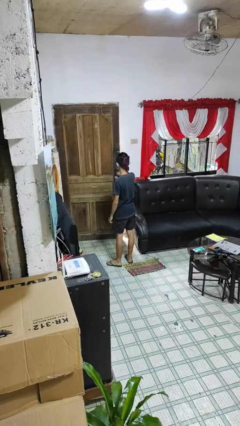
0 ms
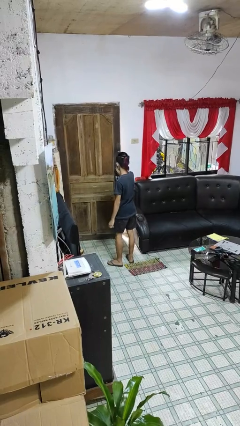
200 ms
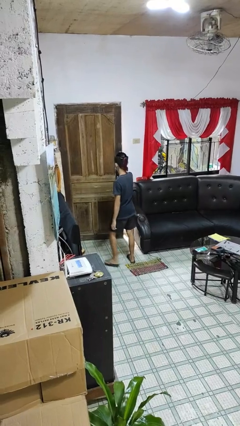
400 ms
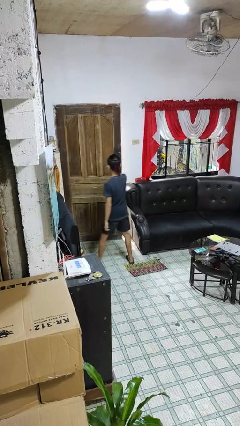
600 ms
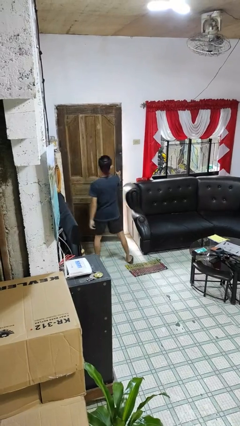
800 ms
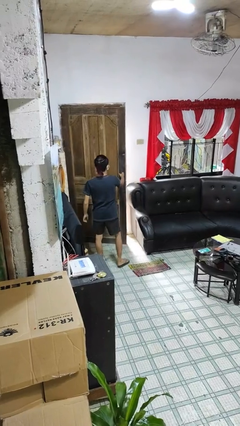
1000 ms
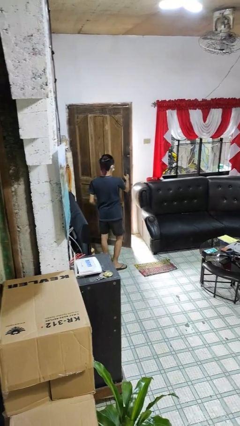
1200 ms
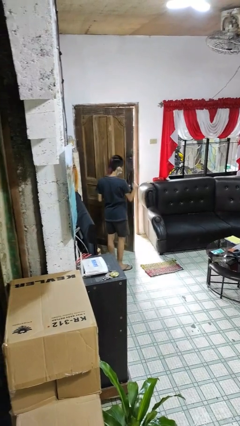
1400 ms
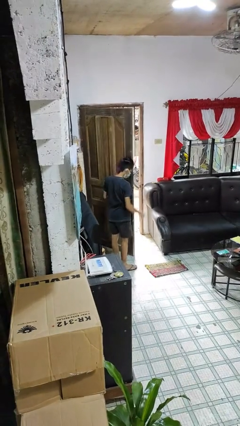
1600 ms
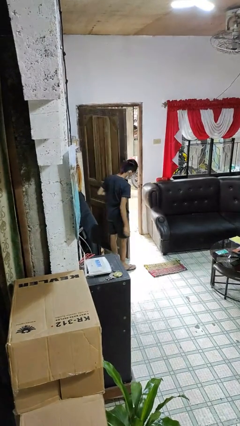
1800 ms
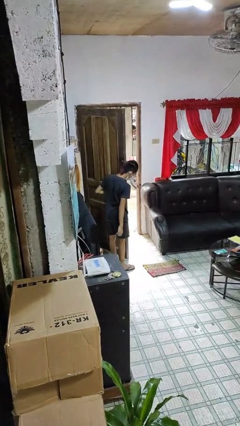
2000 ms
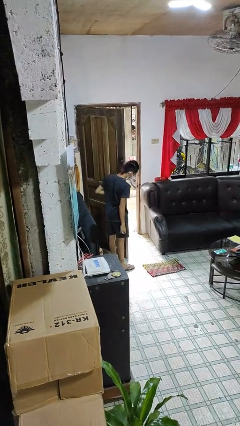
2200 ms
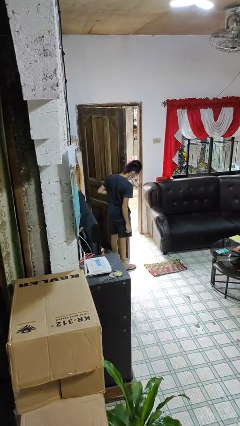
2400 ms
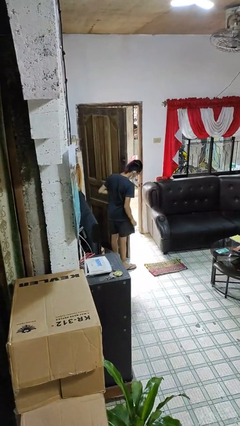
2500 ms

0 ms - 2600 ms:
person opens facility door

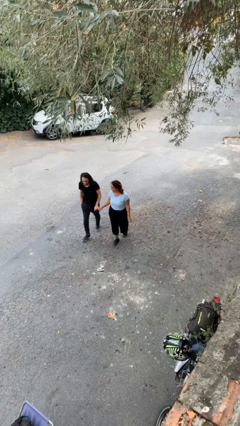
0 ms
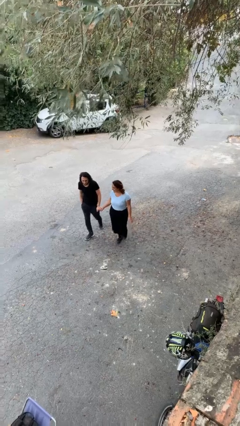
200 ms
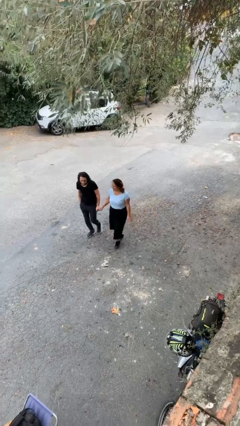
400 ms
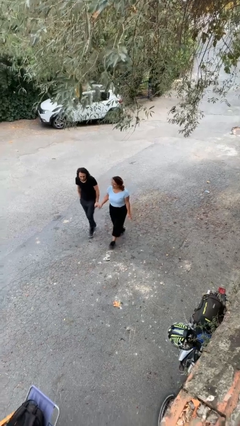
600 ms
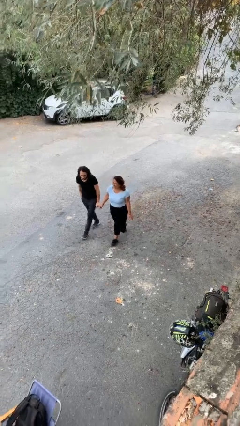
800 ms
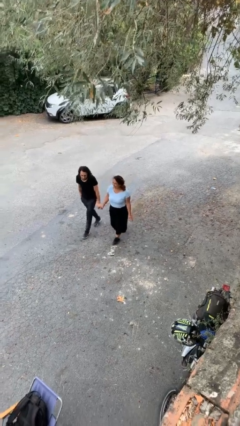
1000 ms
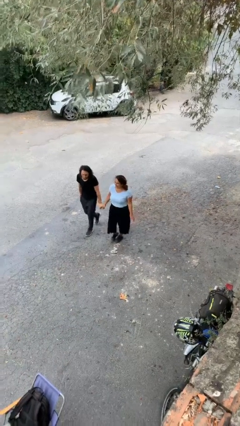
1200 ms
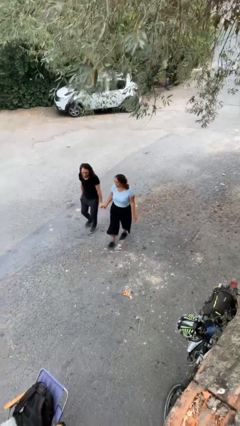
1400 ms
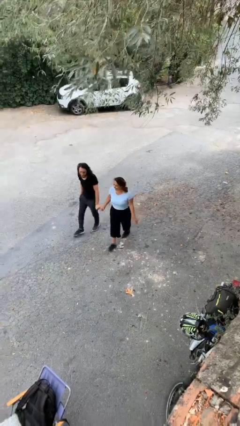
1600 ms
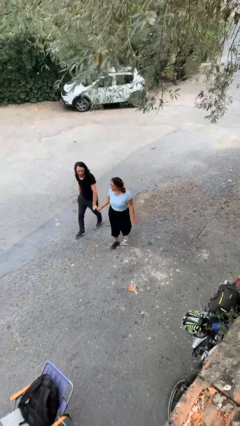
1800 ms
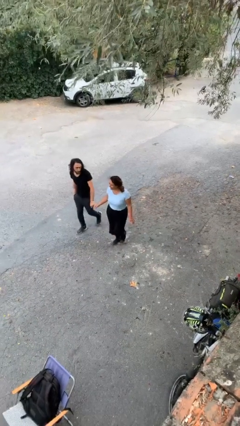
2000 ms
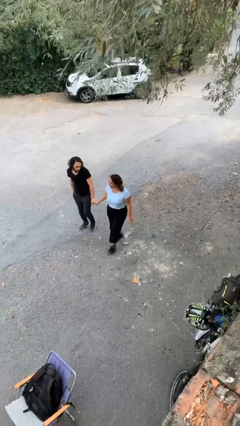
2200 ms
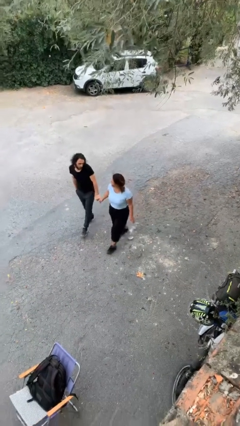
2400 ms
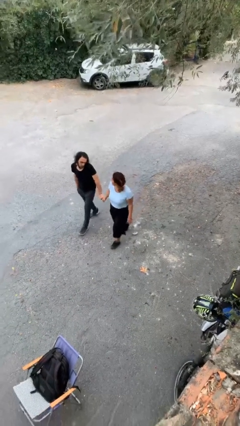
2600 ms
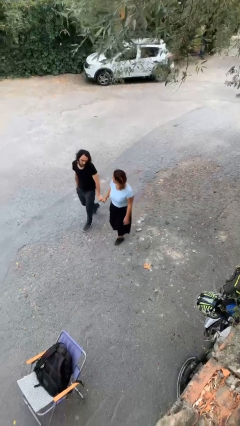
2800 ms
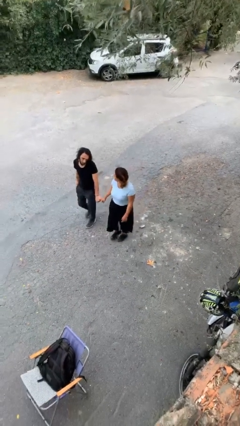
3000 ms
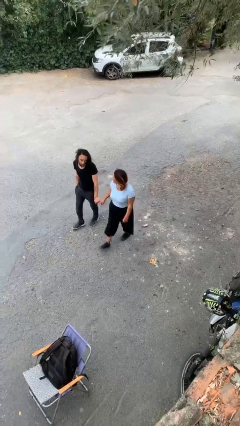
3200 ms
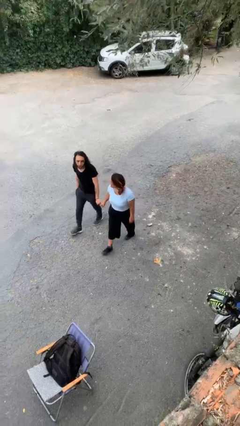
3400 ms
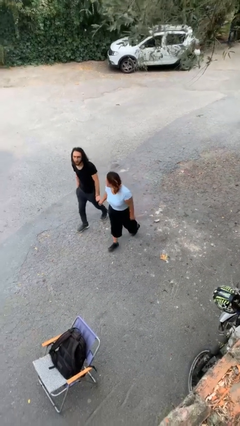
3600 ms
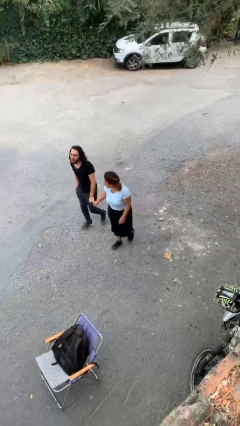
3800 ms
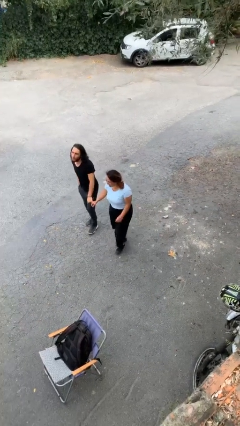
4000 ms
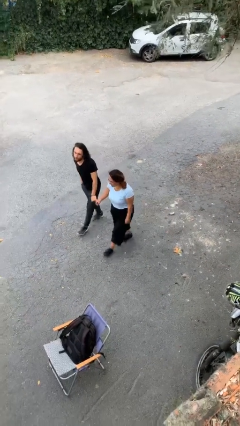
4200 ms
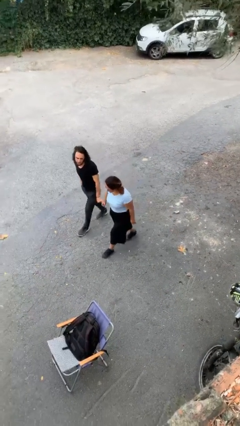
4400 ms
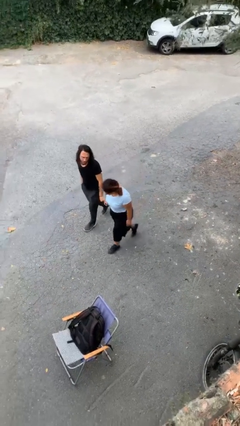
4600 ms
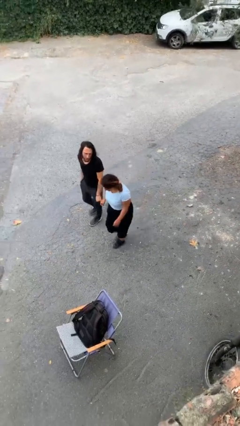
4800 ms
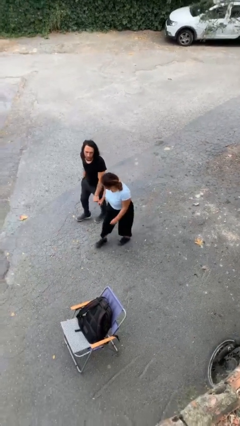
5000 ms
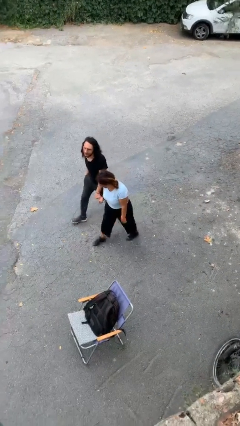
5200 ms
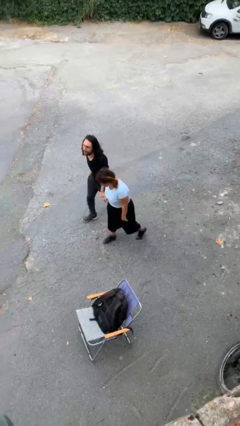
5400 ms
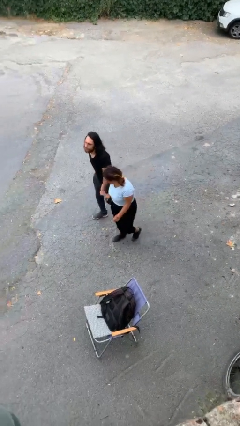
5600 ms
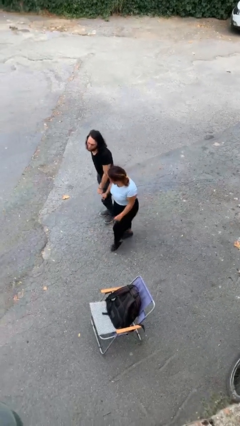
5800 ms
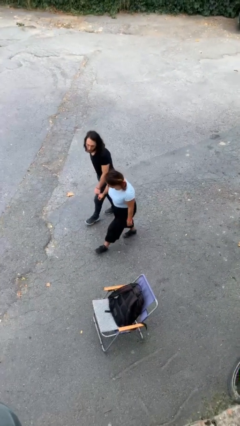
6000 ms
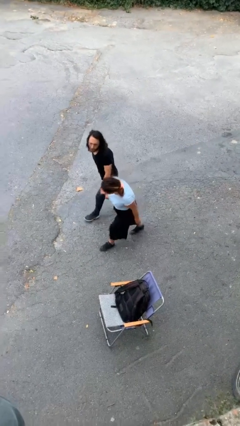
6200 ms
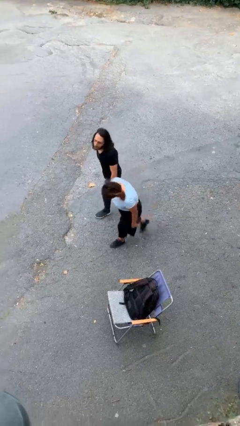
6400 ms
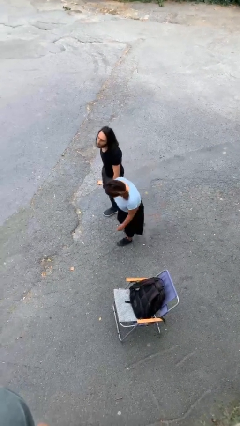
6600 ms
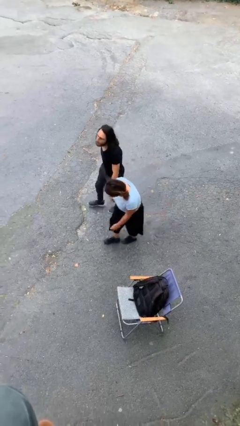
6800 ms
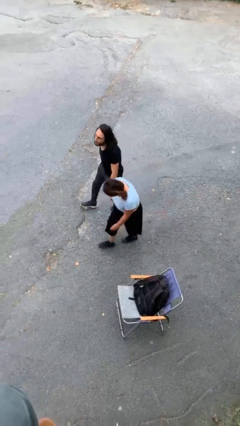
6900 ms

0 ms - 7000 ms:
person holds hand

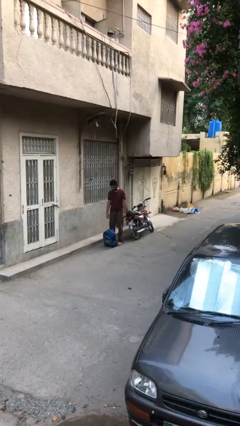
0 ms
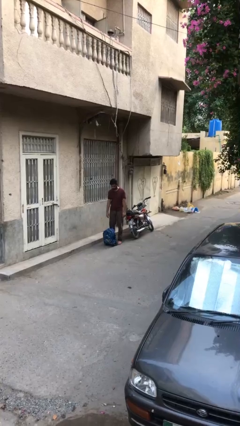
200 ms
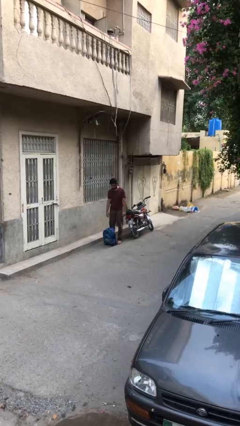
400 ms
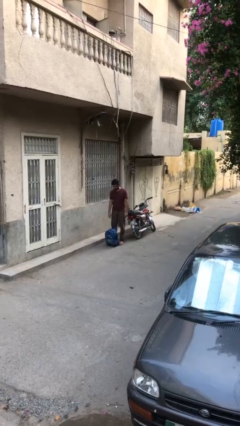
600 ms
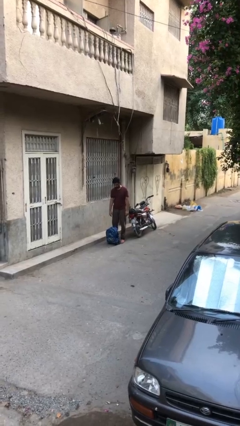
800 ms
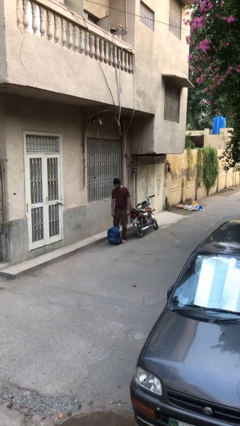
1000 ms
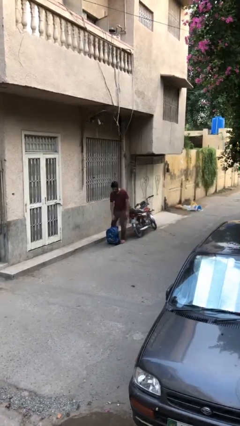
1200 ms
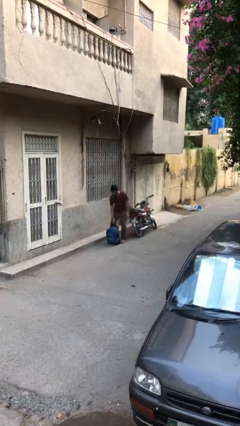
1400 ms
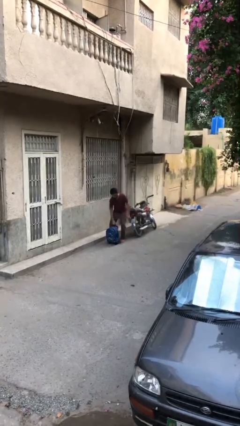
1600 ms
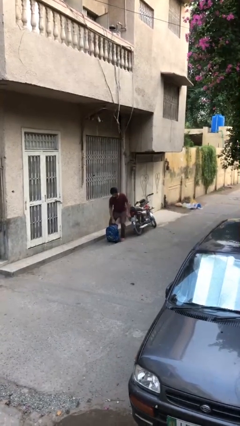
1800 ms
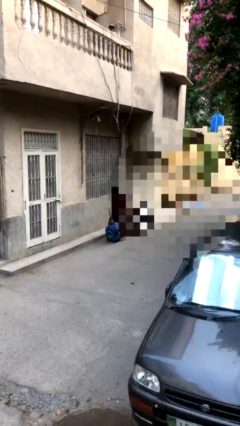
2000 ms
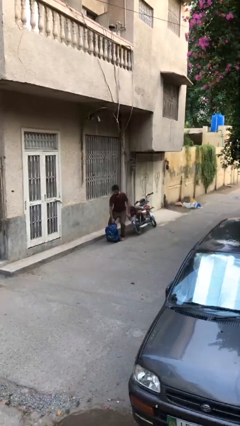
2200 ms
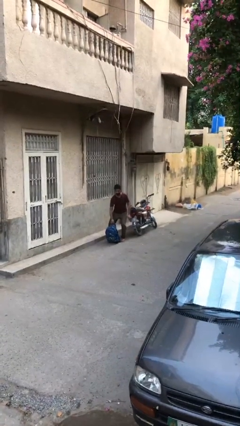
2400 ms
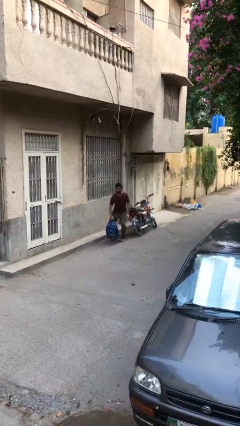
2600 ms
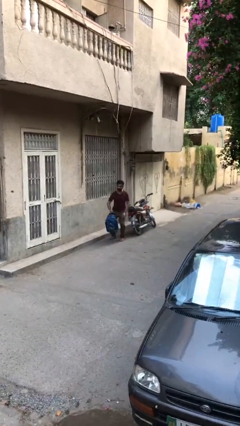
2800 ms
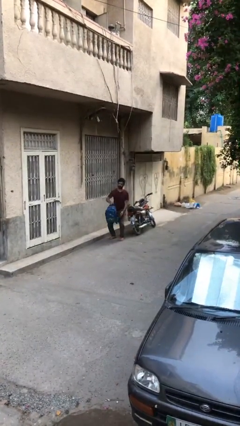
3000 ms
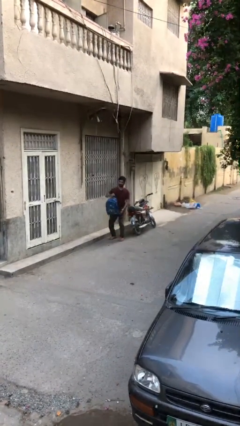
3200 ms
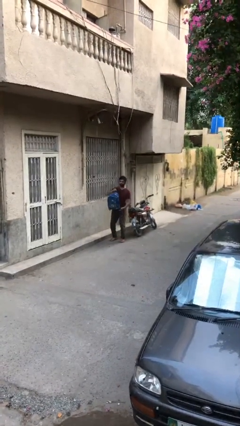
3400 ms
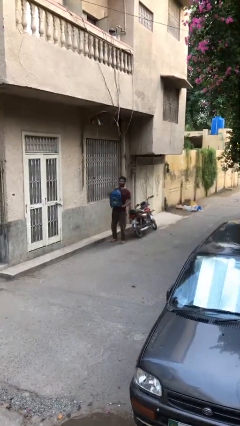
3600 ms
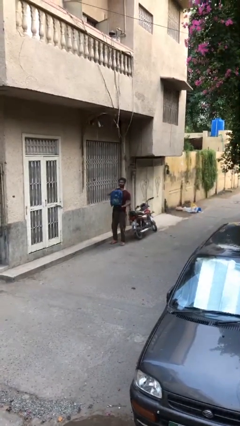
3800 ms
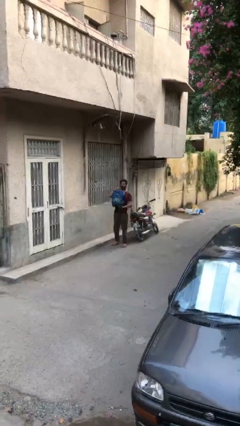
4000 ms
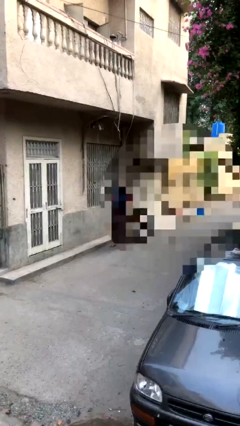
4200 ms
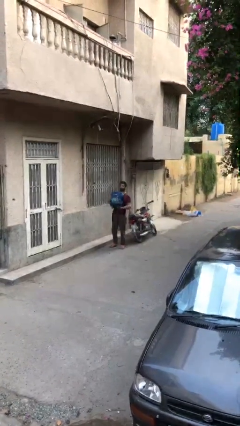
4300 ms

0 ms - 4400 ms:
person picks up object from floor

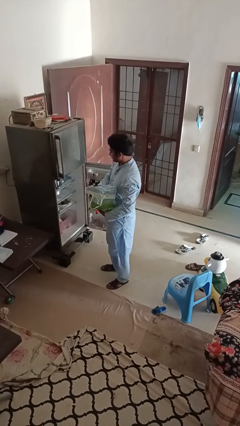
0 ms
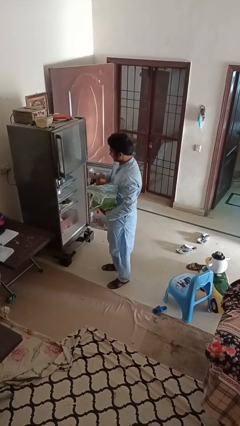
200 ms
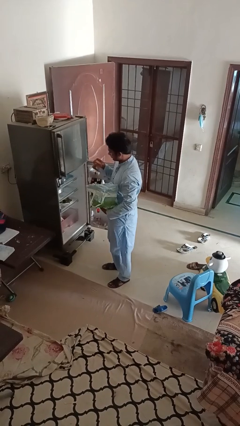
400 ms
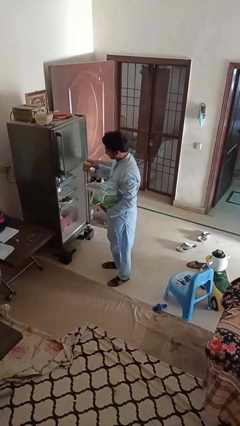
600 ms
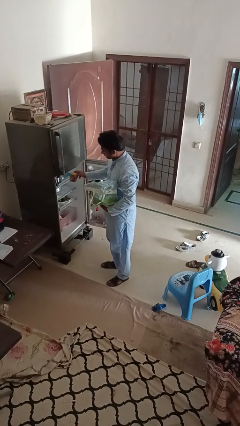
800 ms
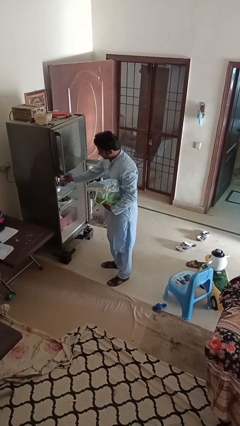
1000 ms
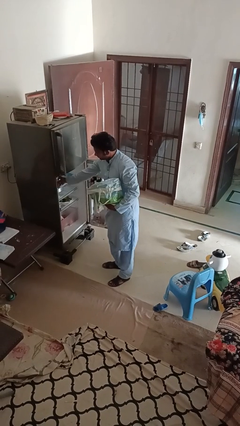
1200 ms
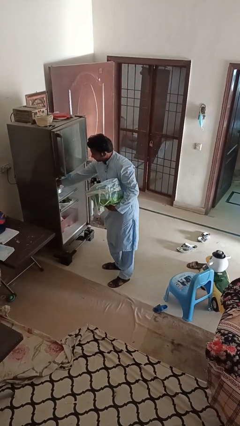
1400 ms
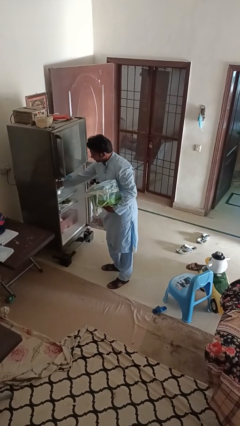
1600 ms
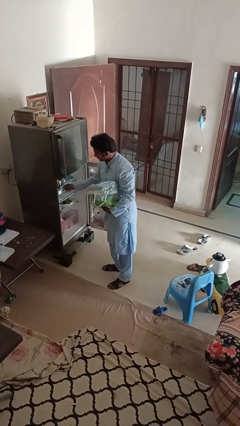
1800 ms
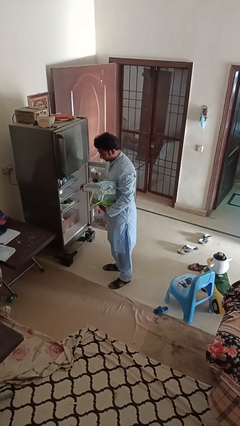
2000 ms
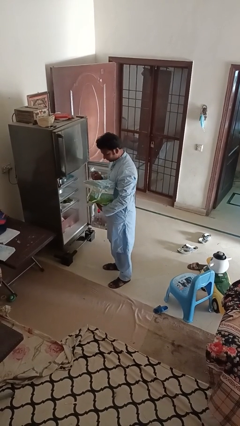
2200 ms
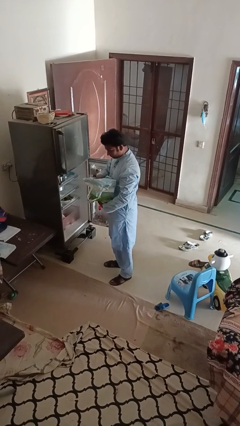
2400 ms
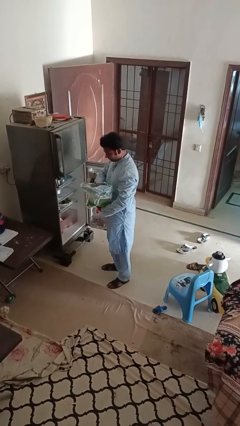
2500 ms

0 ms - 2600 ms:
person loads groceries into refrigerator

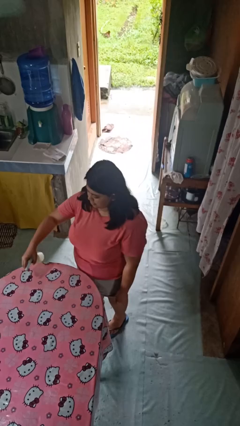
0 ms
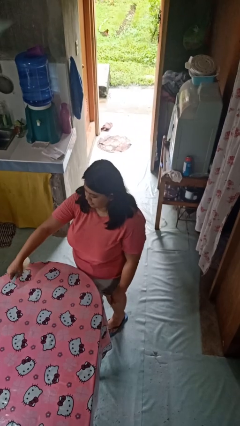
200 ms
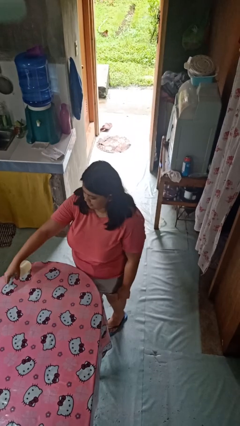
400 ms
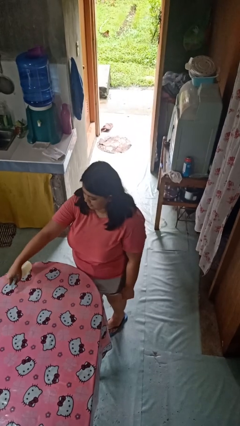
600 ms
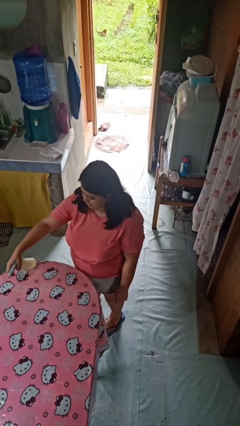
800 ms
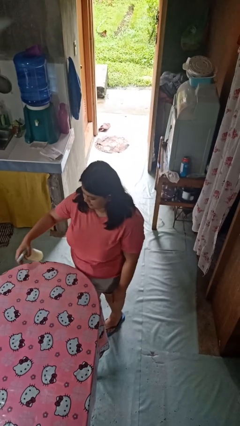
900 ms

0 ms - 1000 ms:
person sprays from bottle
